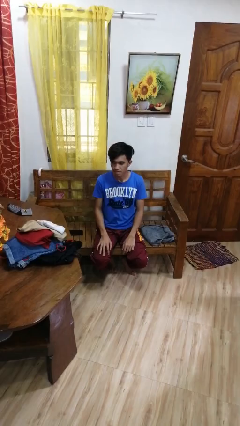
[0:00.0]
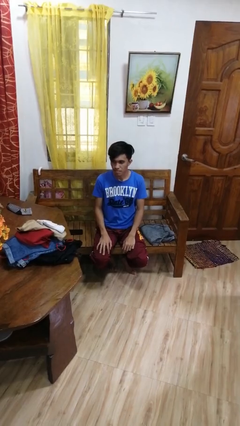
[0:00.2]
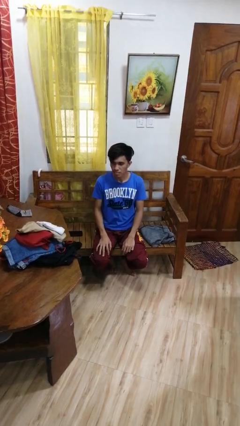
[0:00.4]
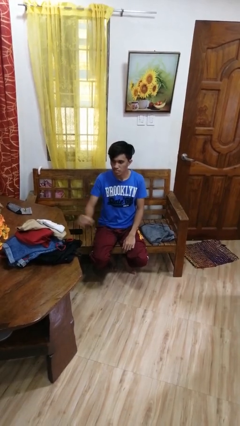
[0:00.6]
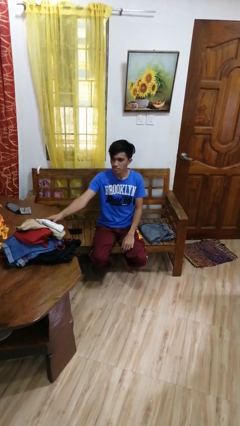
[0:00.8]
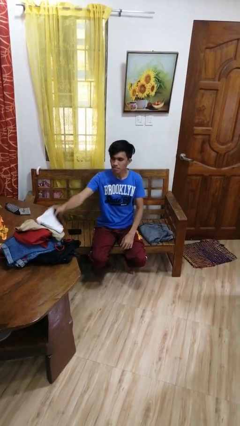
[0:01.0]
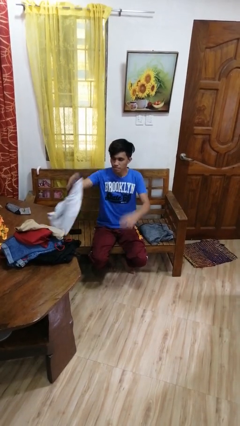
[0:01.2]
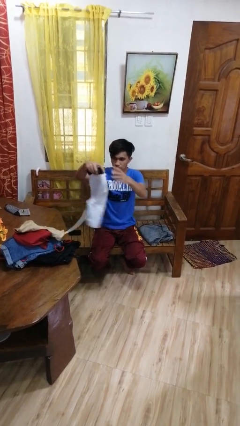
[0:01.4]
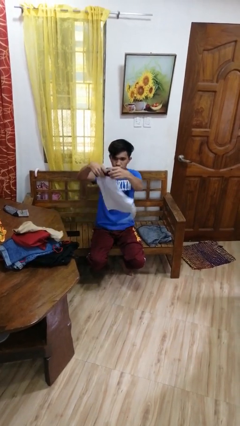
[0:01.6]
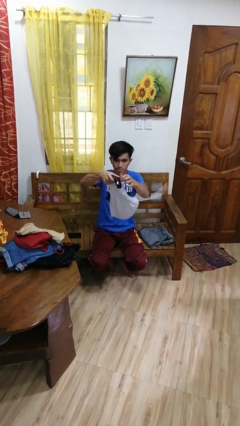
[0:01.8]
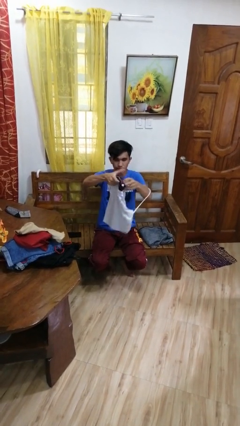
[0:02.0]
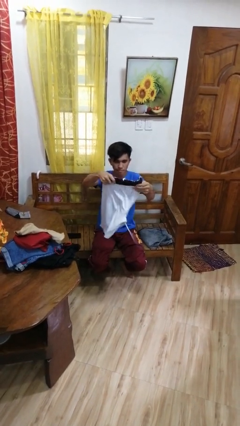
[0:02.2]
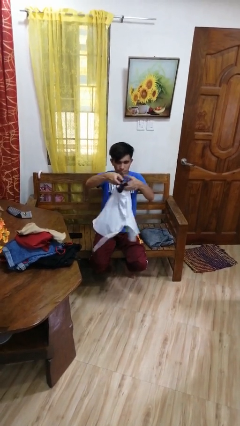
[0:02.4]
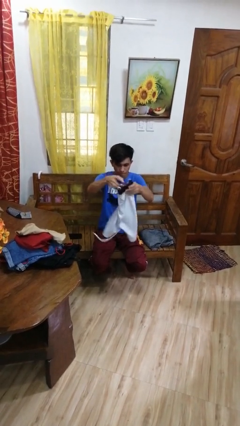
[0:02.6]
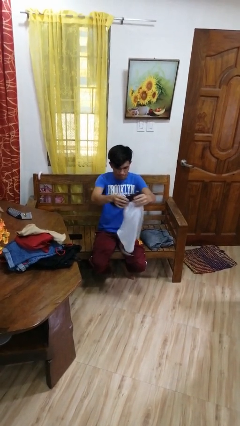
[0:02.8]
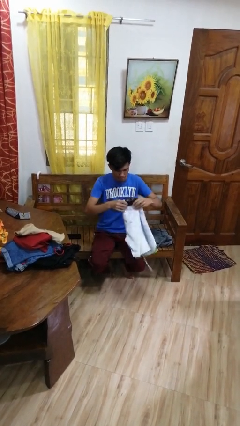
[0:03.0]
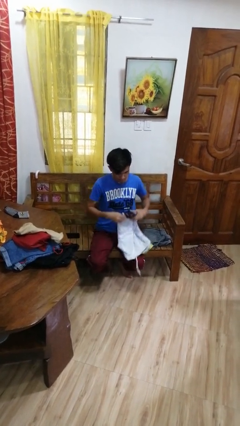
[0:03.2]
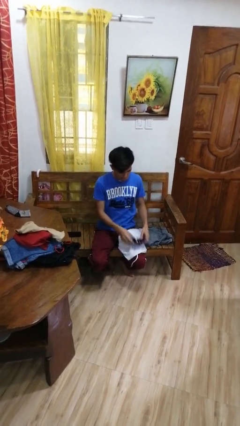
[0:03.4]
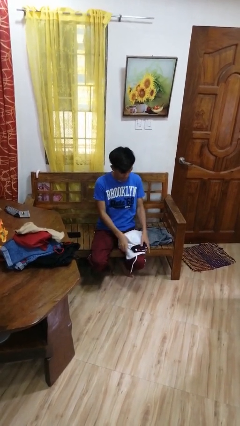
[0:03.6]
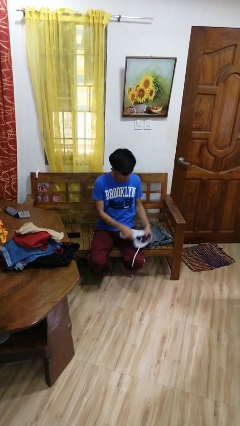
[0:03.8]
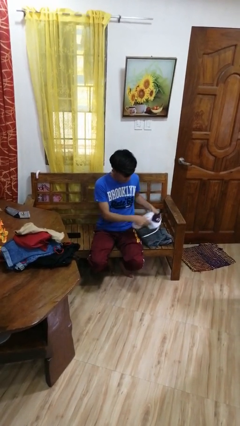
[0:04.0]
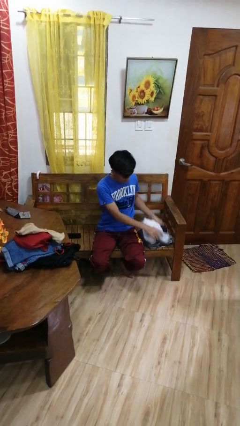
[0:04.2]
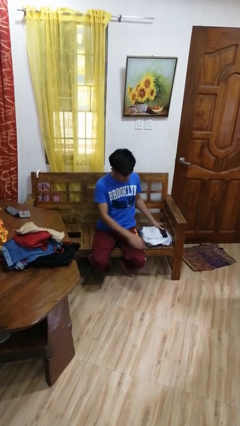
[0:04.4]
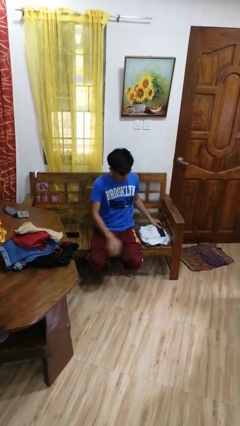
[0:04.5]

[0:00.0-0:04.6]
person folds pants

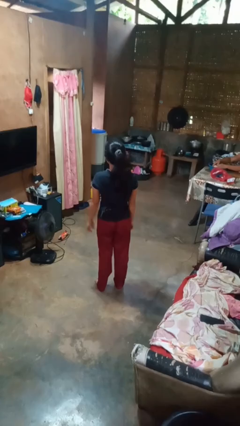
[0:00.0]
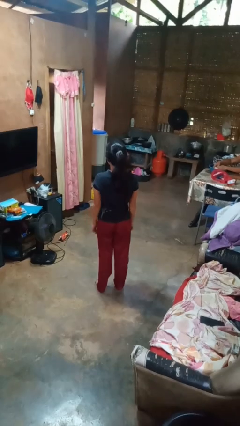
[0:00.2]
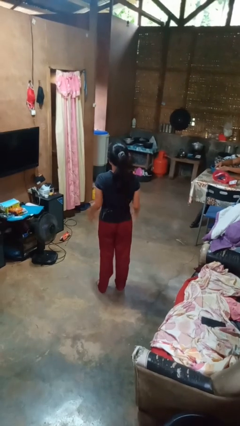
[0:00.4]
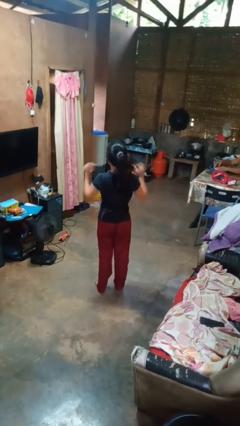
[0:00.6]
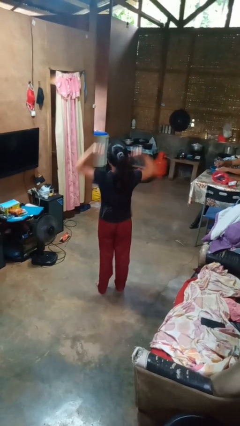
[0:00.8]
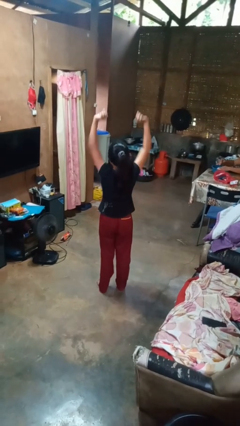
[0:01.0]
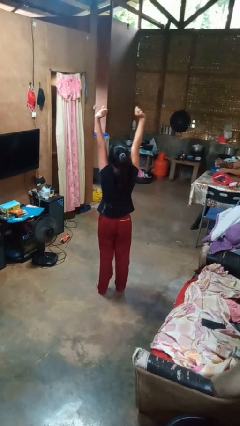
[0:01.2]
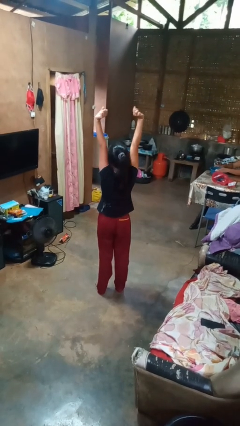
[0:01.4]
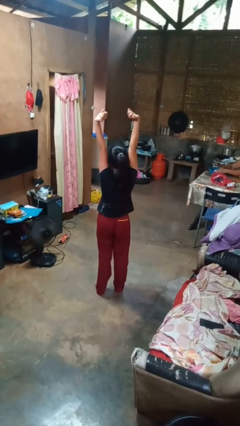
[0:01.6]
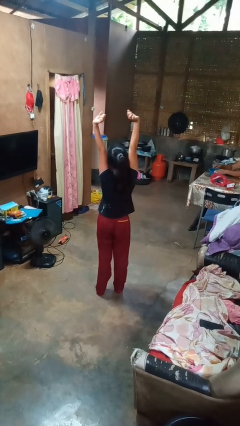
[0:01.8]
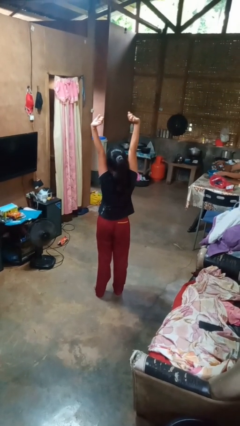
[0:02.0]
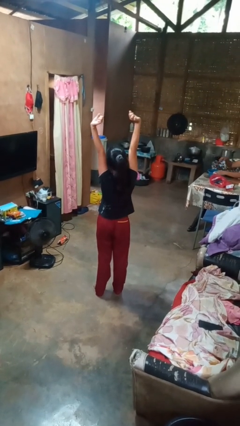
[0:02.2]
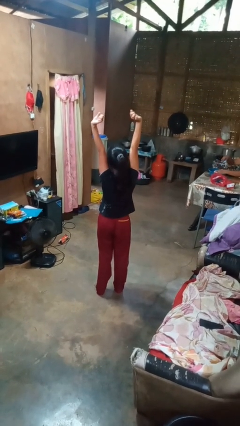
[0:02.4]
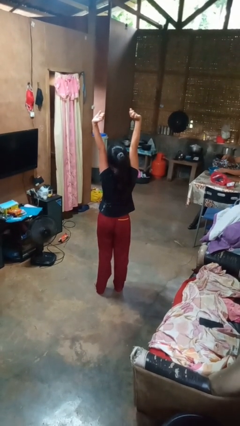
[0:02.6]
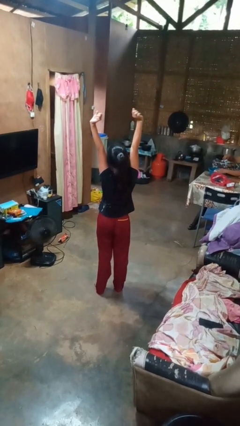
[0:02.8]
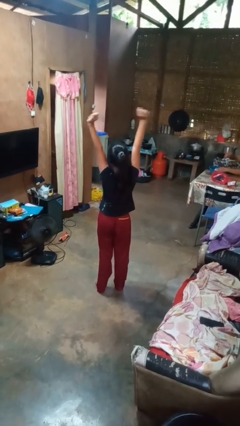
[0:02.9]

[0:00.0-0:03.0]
person stretches arms over head

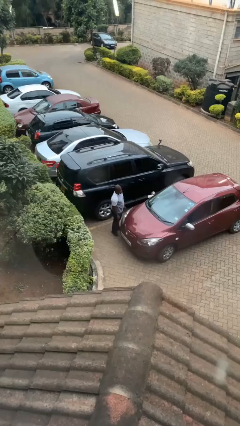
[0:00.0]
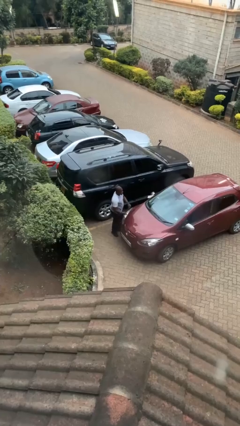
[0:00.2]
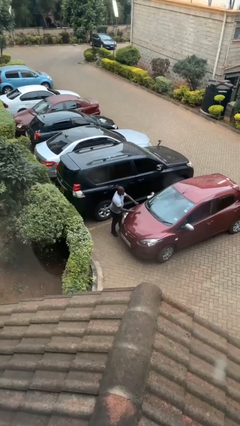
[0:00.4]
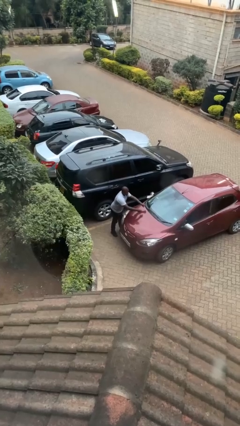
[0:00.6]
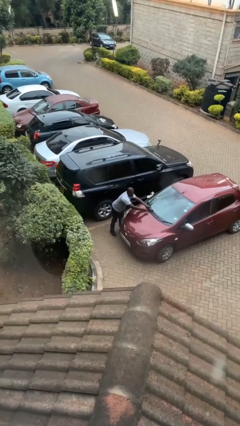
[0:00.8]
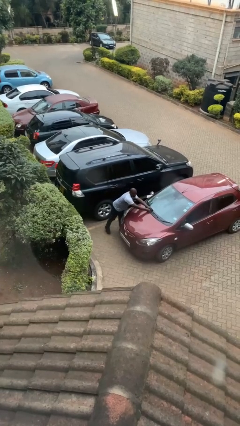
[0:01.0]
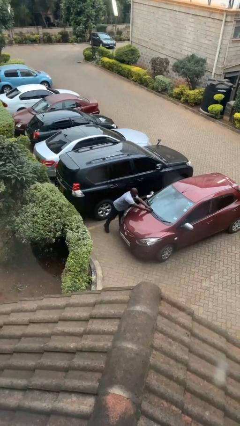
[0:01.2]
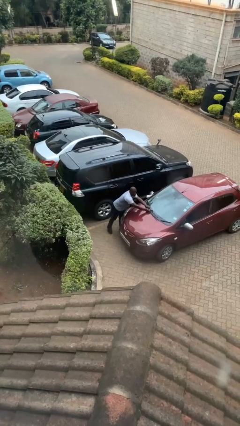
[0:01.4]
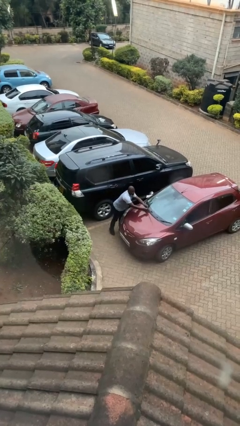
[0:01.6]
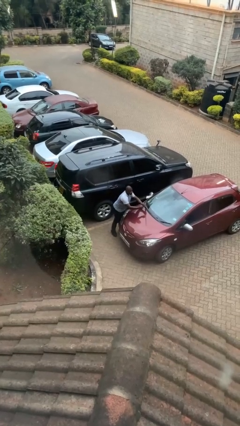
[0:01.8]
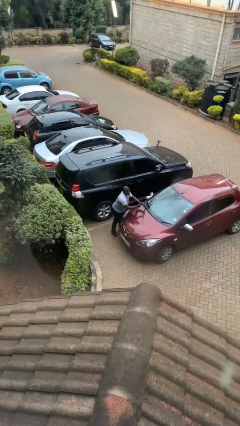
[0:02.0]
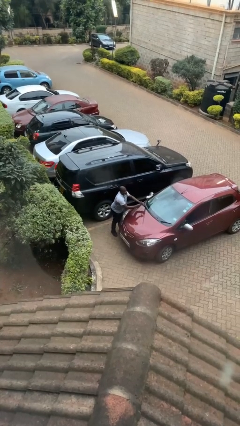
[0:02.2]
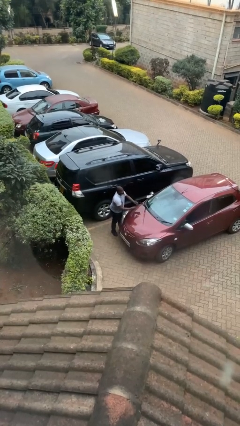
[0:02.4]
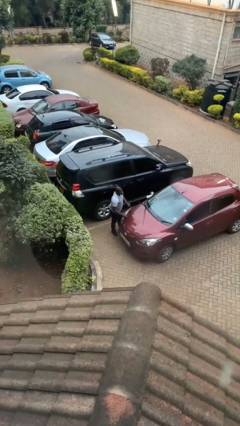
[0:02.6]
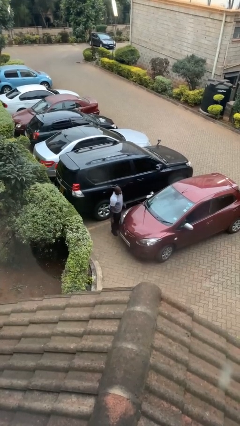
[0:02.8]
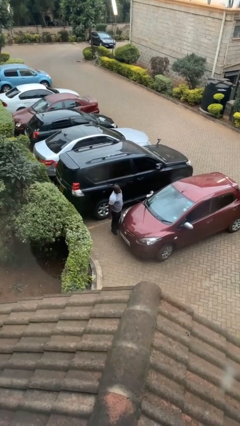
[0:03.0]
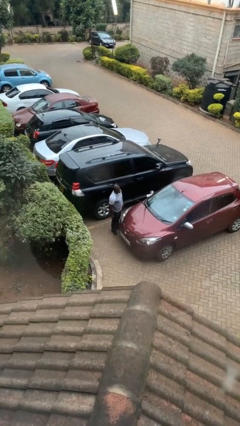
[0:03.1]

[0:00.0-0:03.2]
person flips up car wipers

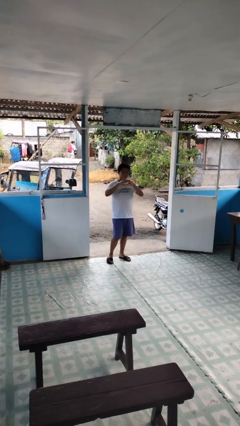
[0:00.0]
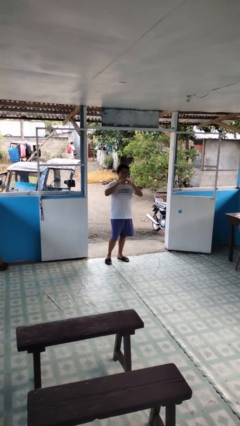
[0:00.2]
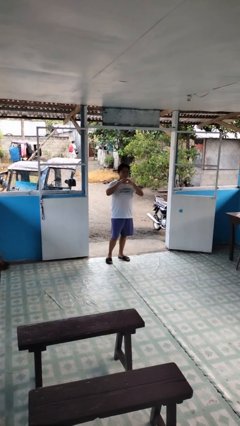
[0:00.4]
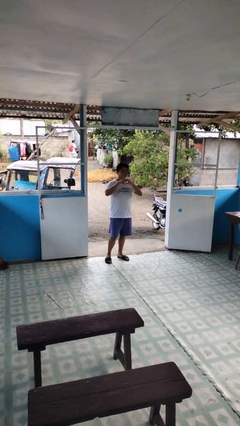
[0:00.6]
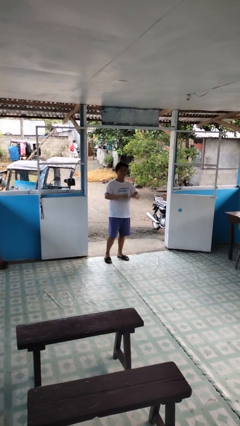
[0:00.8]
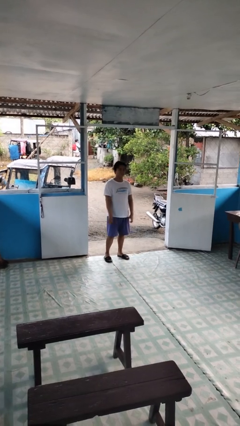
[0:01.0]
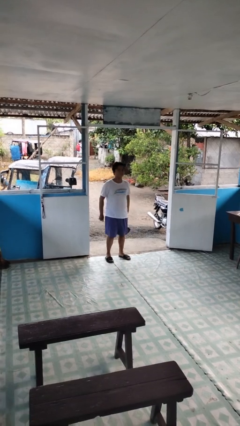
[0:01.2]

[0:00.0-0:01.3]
person gestures heart

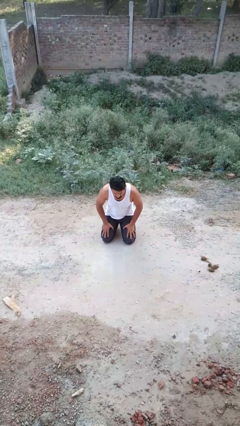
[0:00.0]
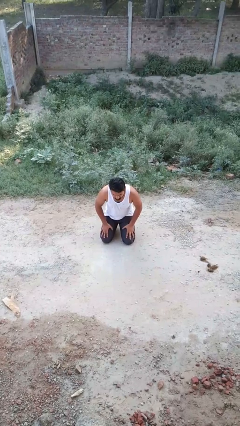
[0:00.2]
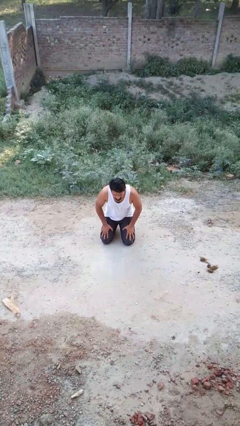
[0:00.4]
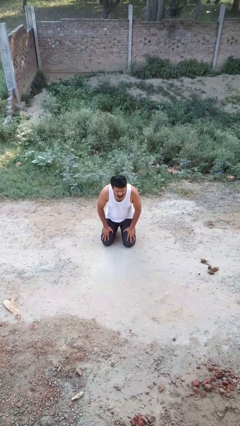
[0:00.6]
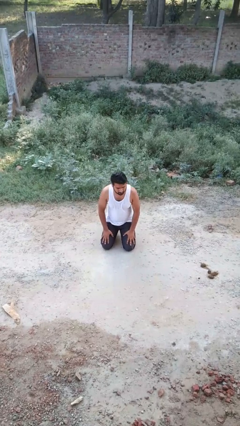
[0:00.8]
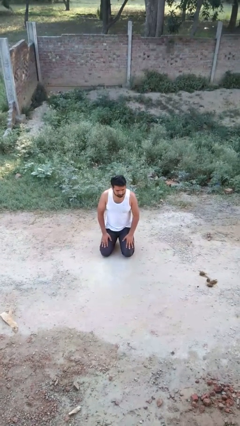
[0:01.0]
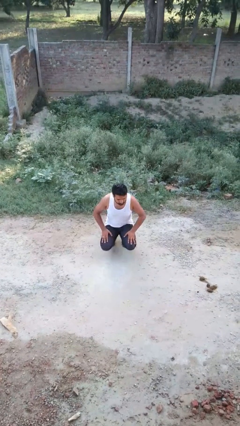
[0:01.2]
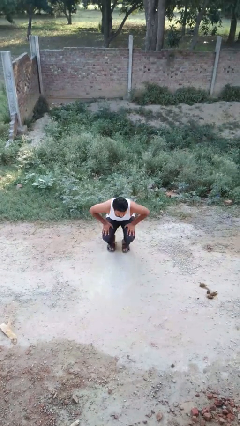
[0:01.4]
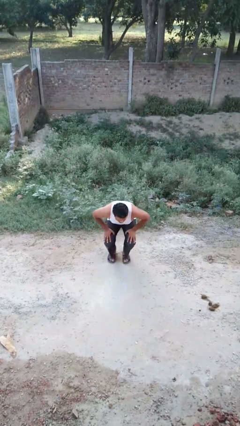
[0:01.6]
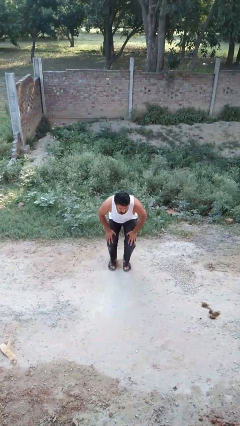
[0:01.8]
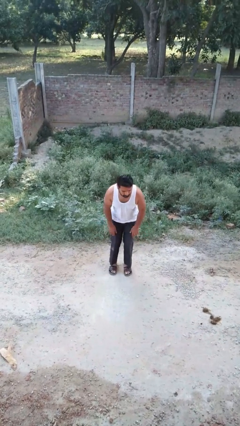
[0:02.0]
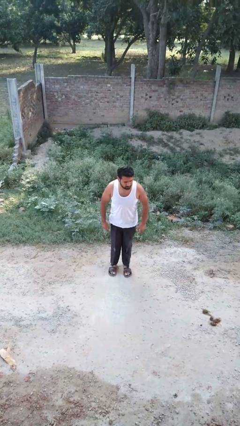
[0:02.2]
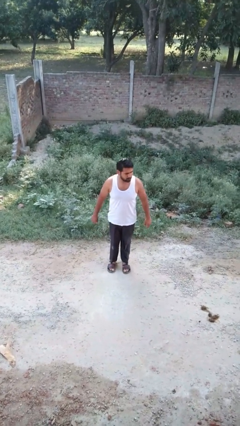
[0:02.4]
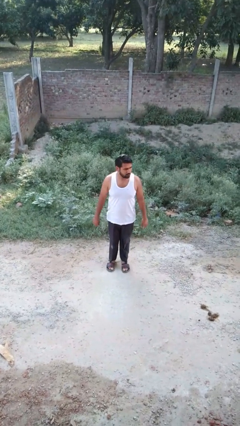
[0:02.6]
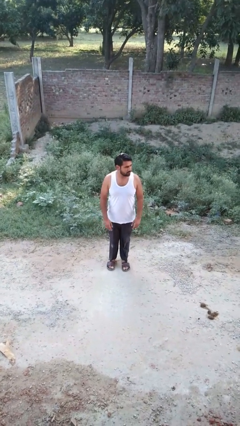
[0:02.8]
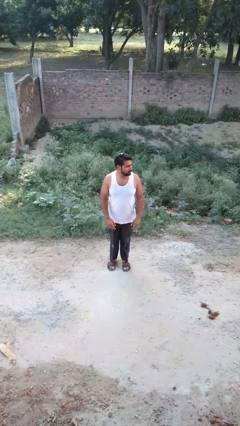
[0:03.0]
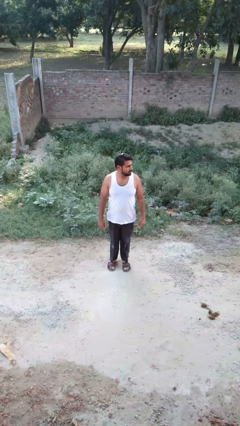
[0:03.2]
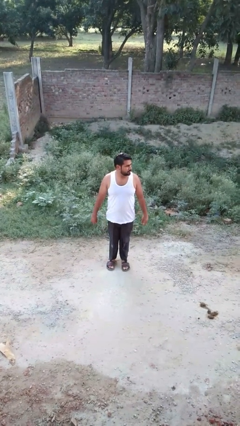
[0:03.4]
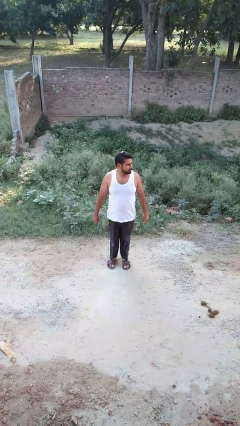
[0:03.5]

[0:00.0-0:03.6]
person stands up from floor

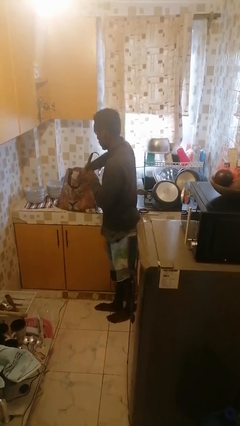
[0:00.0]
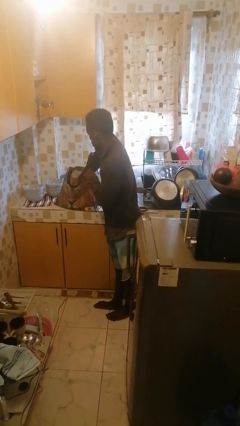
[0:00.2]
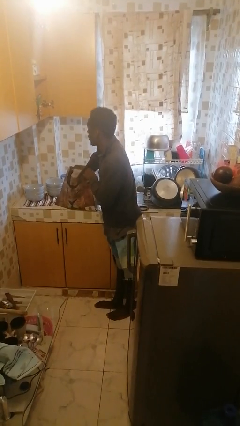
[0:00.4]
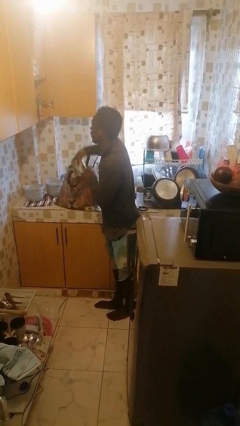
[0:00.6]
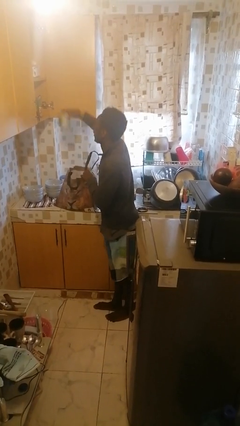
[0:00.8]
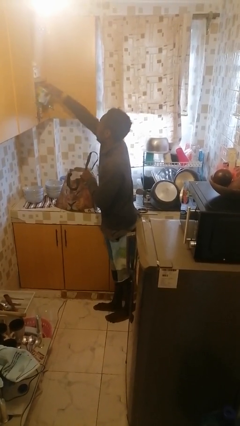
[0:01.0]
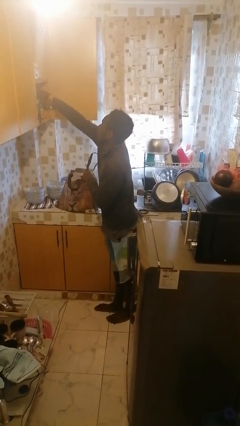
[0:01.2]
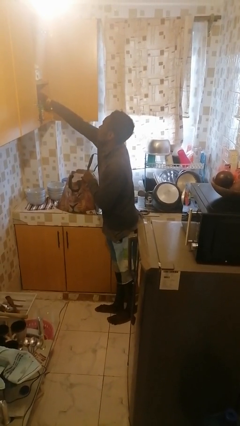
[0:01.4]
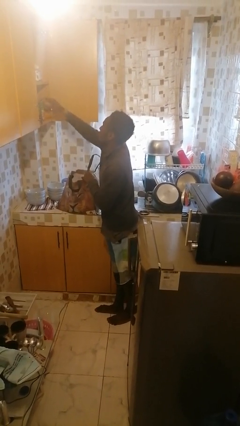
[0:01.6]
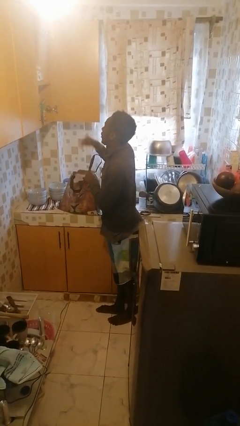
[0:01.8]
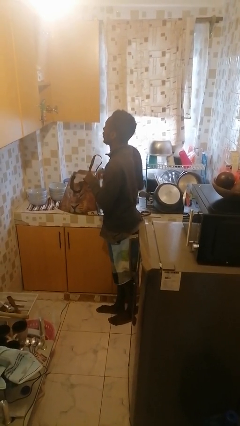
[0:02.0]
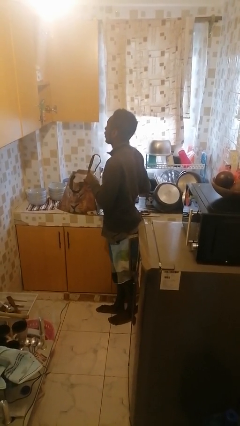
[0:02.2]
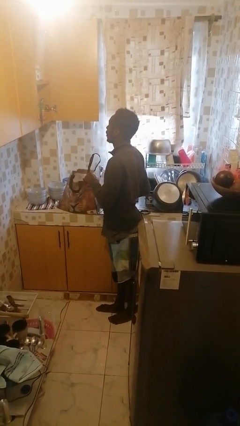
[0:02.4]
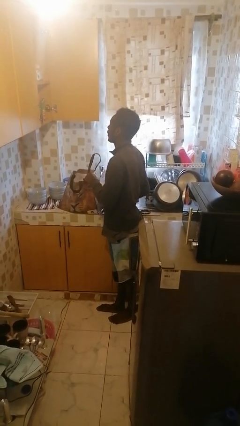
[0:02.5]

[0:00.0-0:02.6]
person loads groceries into cabinet
